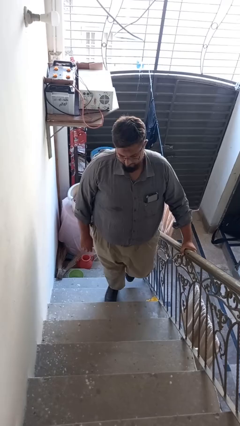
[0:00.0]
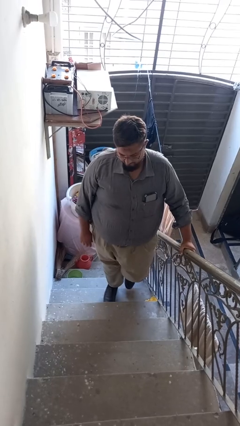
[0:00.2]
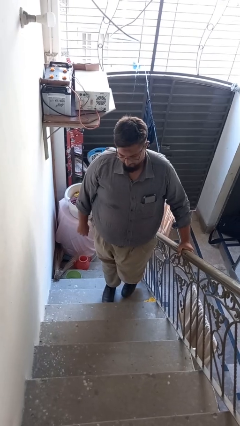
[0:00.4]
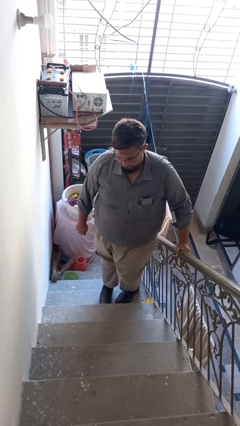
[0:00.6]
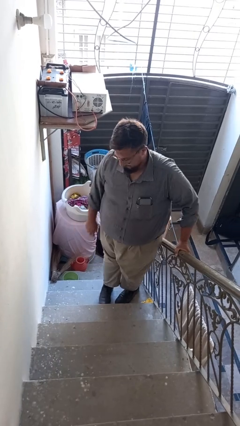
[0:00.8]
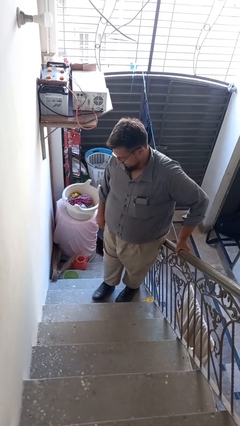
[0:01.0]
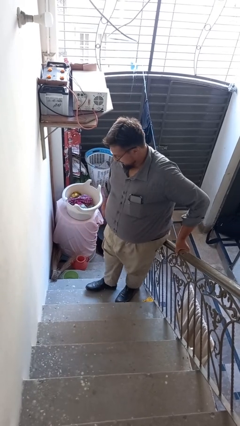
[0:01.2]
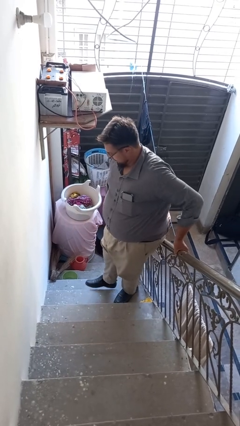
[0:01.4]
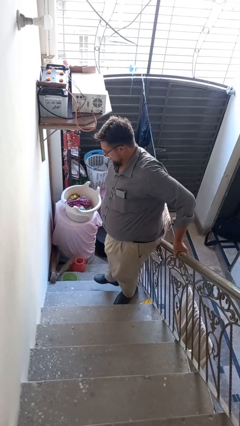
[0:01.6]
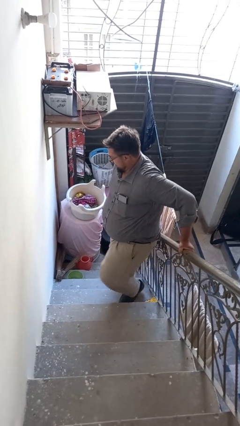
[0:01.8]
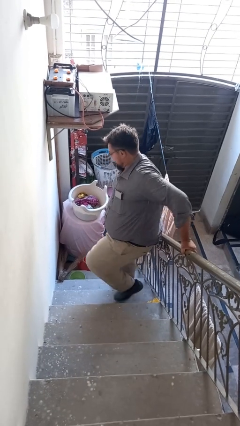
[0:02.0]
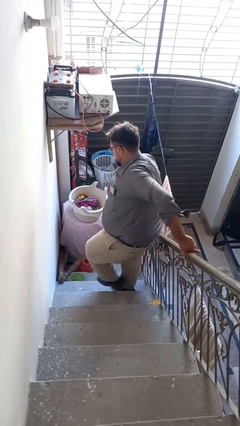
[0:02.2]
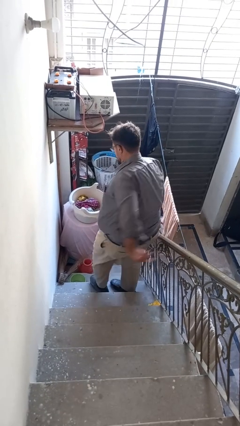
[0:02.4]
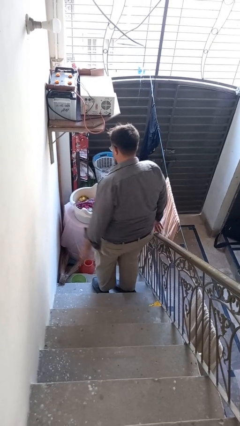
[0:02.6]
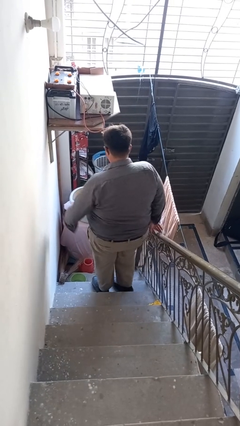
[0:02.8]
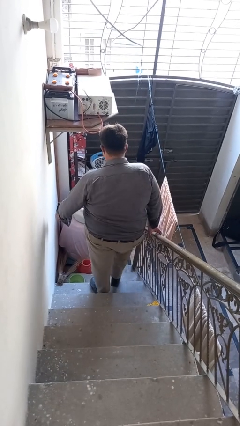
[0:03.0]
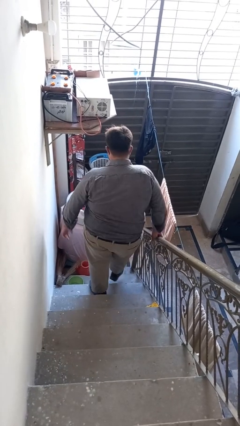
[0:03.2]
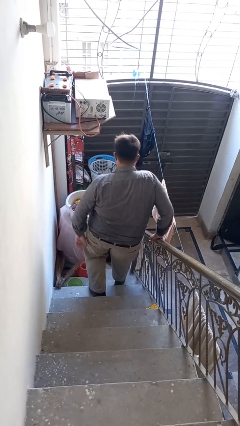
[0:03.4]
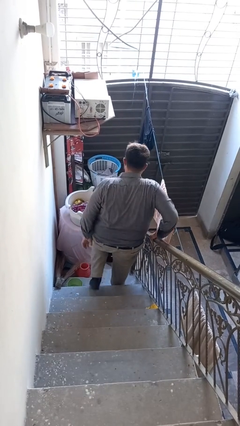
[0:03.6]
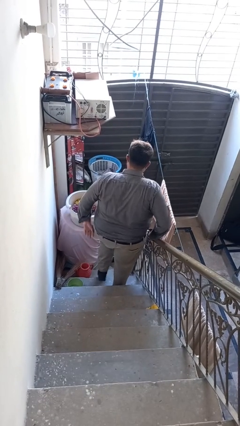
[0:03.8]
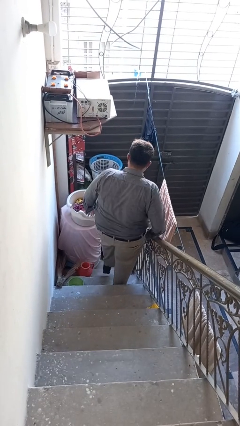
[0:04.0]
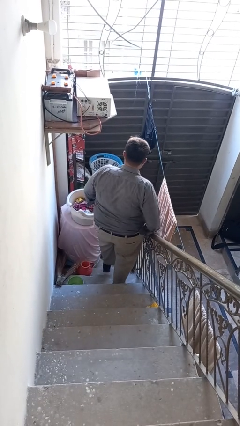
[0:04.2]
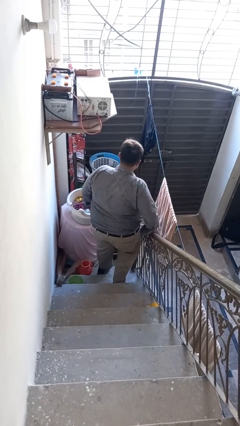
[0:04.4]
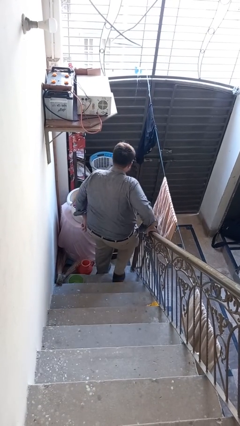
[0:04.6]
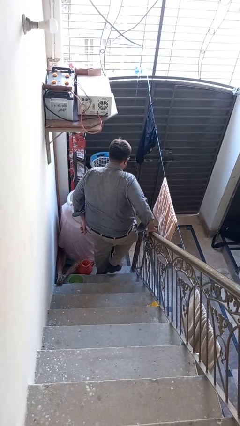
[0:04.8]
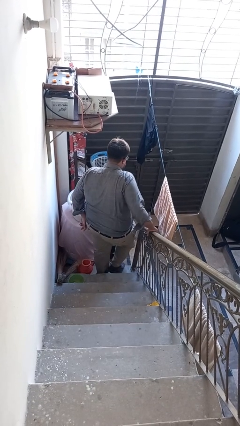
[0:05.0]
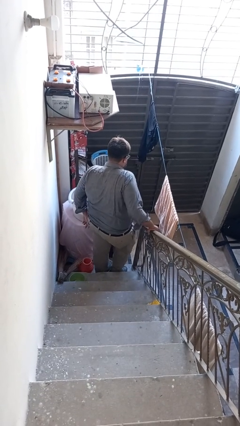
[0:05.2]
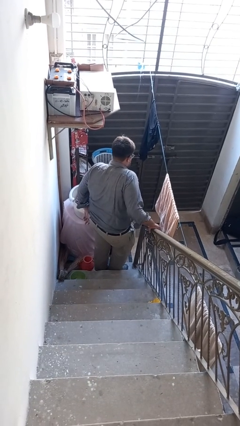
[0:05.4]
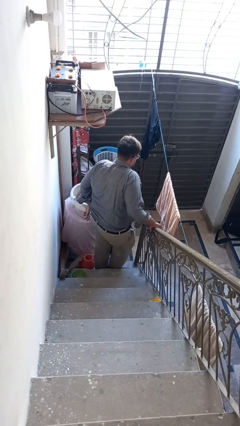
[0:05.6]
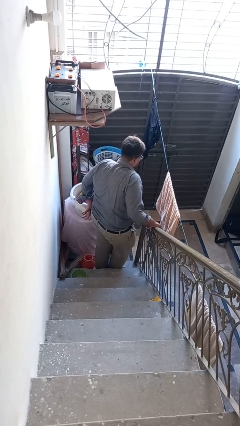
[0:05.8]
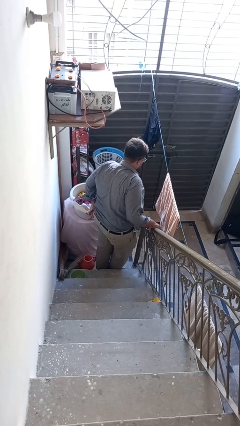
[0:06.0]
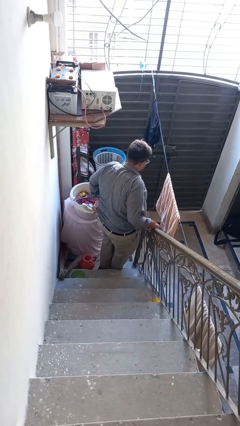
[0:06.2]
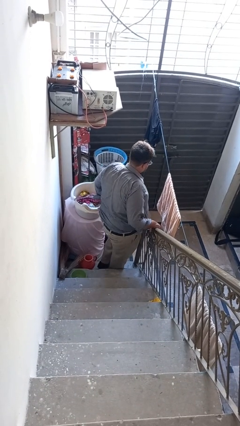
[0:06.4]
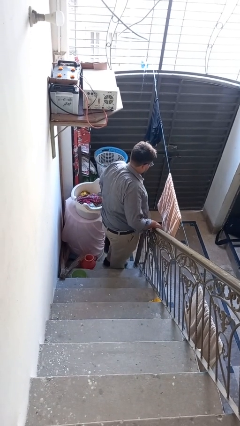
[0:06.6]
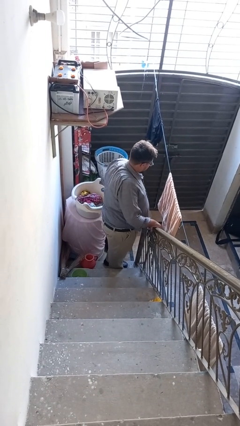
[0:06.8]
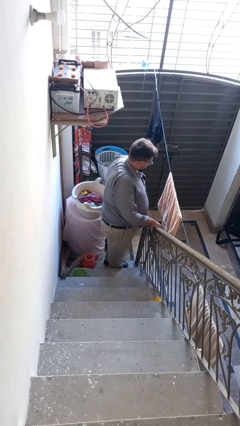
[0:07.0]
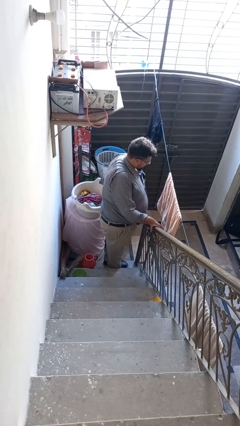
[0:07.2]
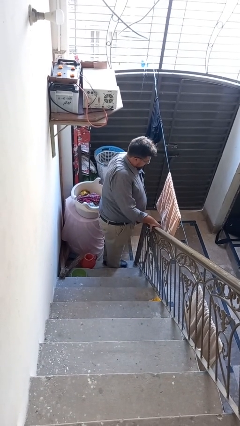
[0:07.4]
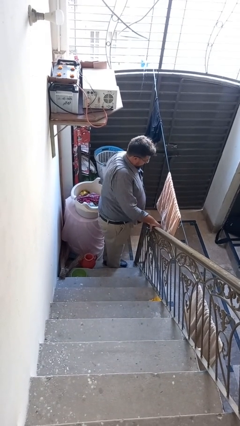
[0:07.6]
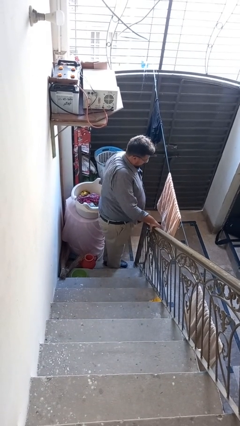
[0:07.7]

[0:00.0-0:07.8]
person climbs down stairs

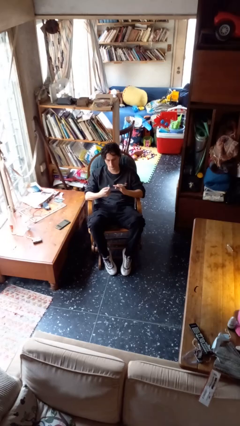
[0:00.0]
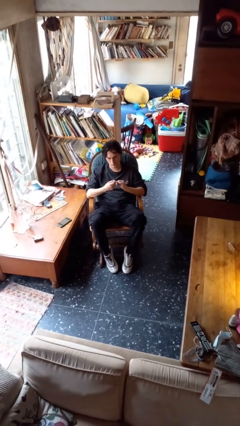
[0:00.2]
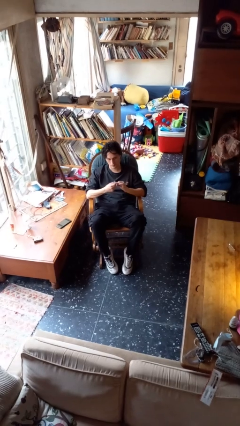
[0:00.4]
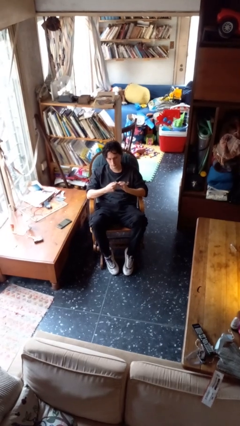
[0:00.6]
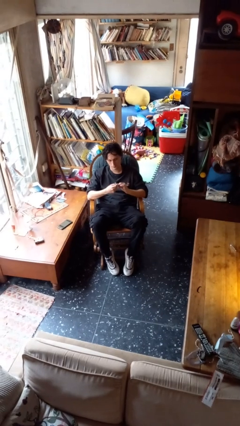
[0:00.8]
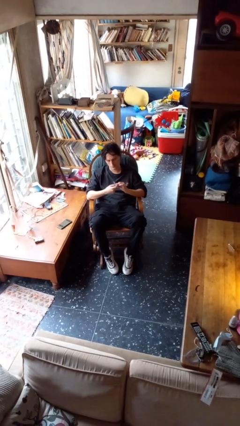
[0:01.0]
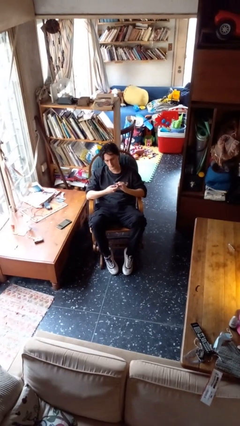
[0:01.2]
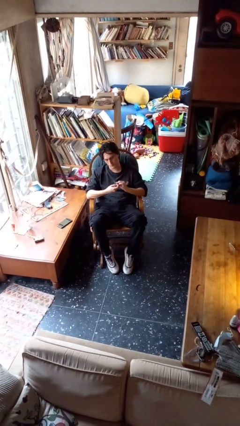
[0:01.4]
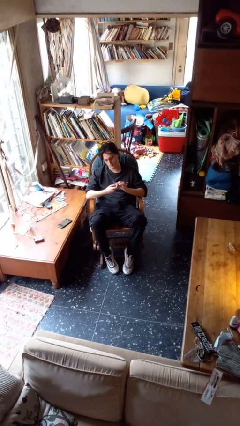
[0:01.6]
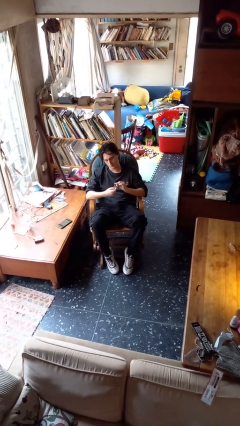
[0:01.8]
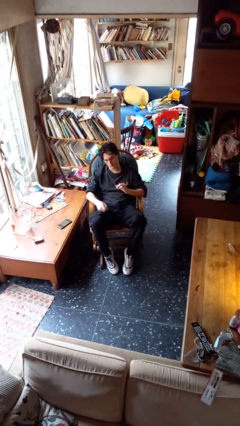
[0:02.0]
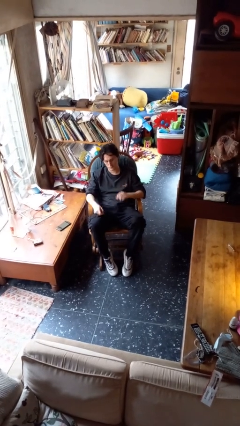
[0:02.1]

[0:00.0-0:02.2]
person files fingernails

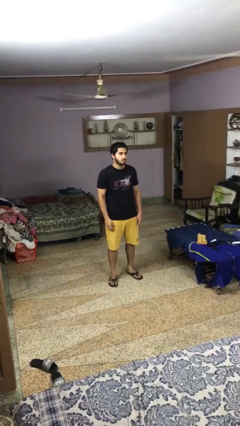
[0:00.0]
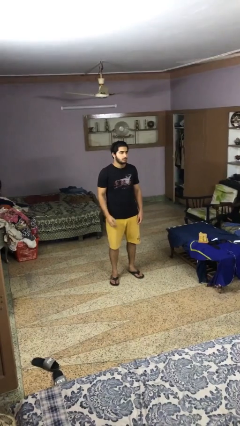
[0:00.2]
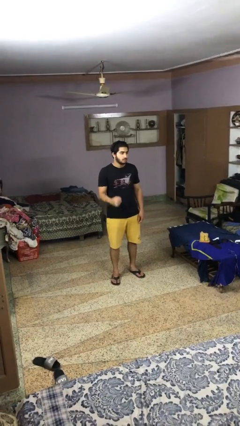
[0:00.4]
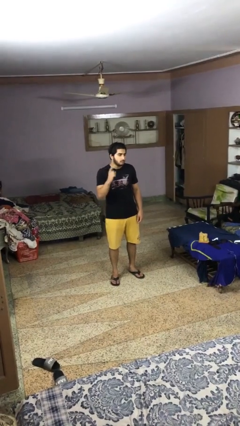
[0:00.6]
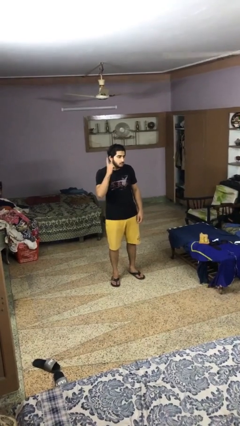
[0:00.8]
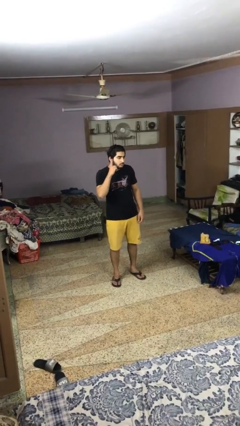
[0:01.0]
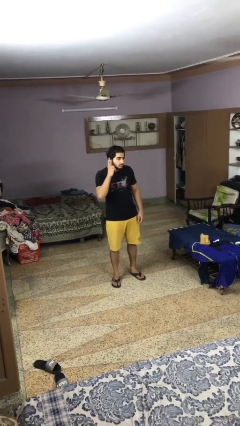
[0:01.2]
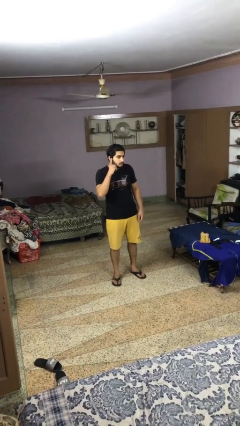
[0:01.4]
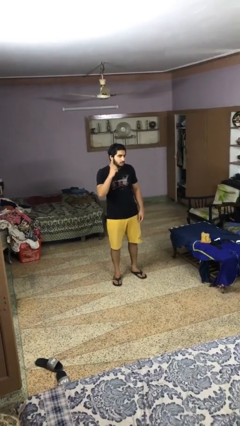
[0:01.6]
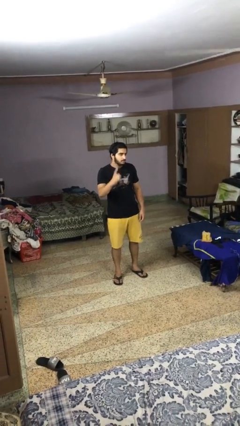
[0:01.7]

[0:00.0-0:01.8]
person gestures listen closely

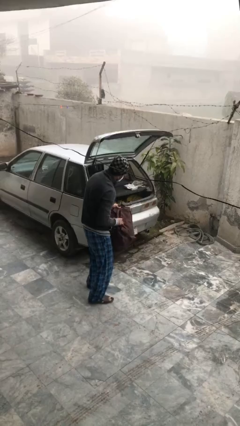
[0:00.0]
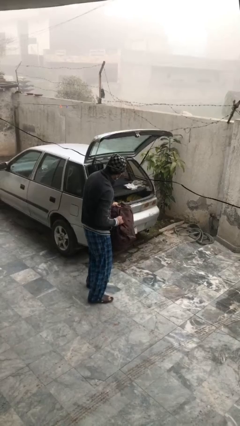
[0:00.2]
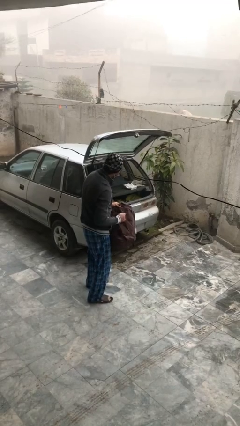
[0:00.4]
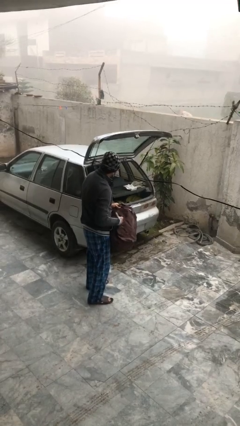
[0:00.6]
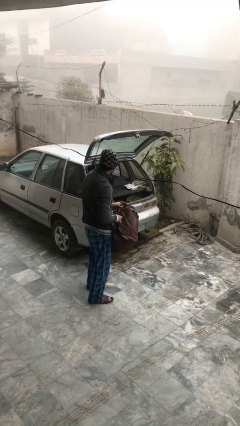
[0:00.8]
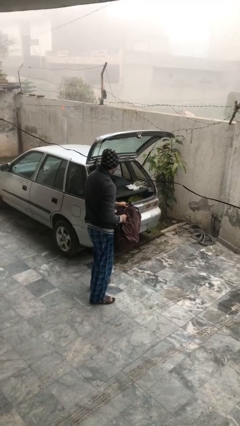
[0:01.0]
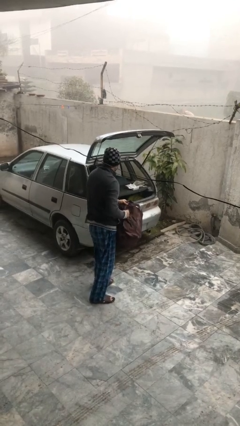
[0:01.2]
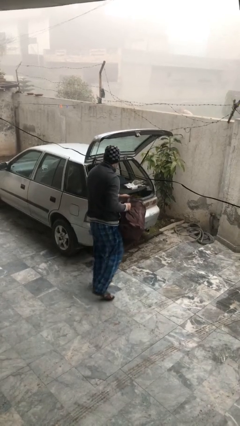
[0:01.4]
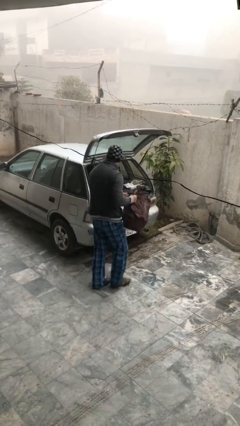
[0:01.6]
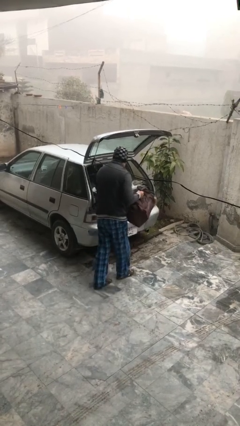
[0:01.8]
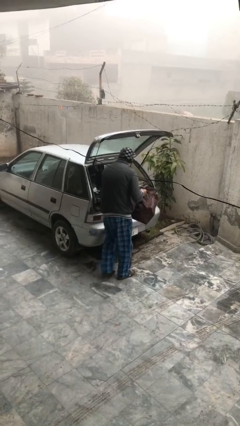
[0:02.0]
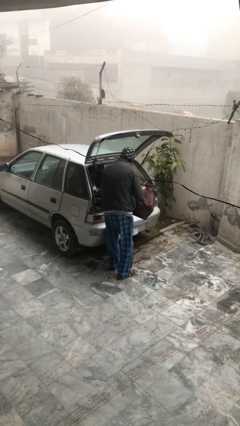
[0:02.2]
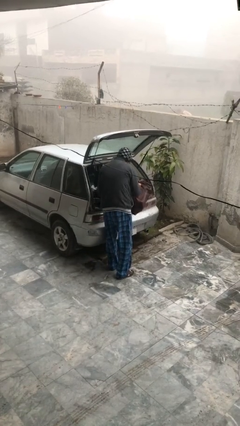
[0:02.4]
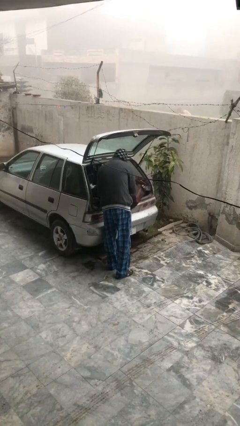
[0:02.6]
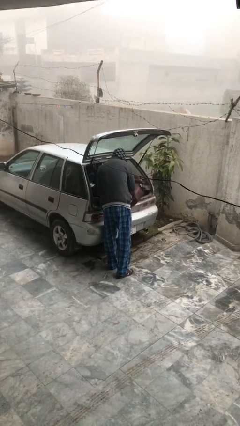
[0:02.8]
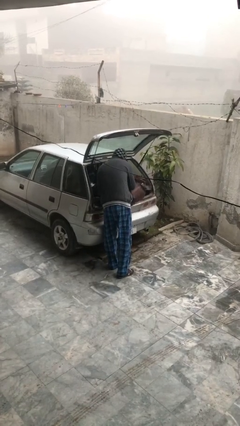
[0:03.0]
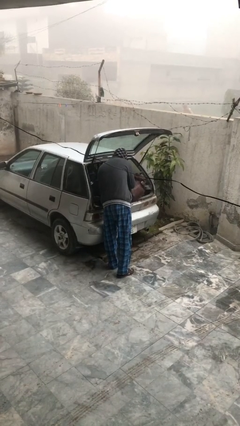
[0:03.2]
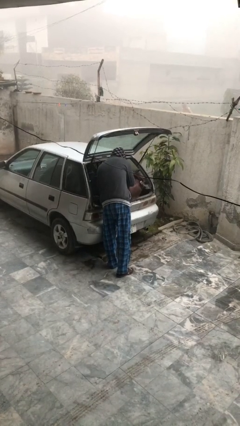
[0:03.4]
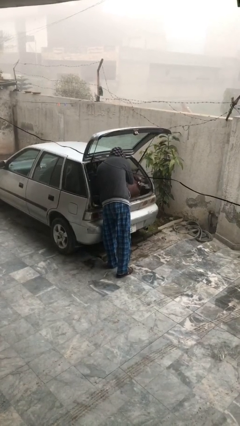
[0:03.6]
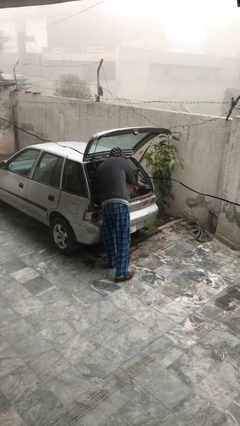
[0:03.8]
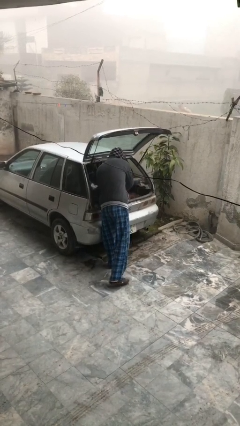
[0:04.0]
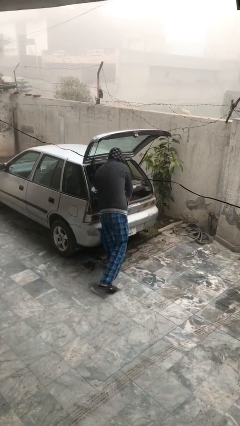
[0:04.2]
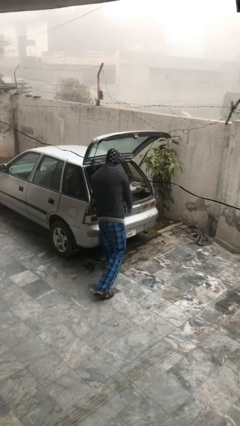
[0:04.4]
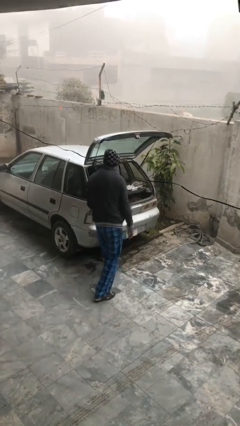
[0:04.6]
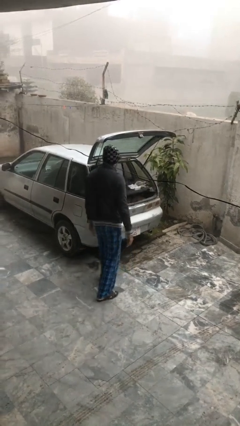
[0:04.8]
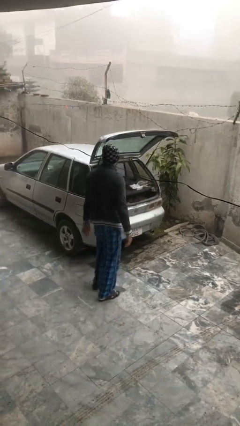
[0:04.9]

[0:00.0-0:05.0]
person loads car

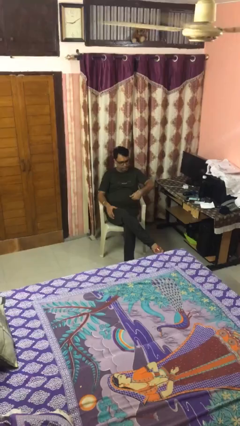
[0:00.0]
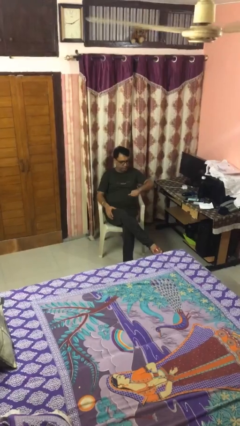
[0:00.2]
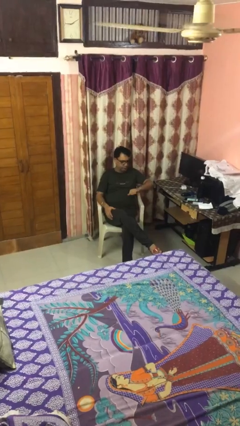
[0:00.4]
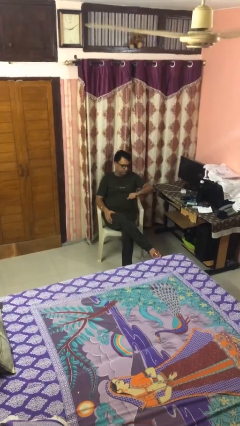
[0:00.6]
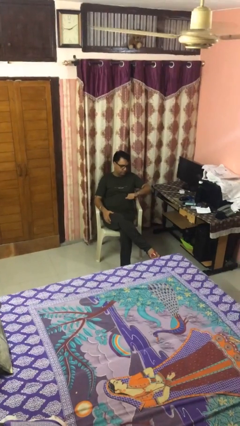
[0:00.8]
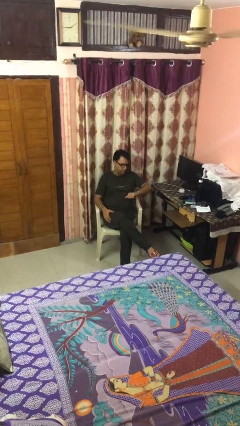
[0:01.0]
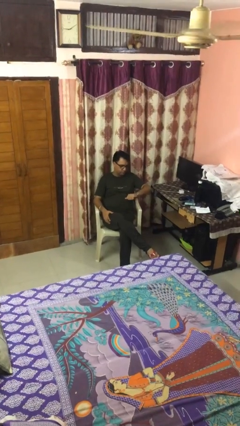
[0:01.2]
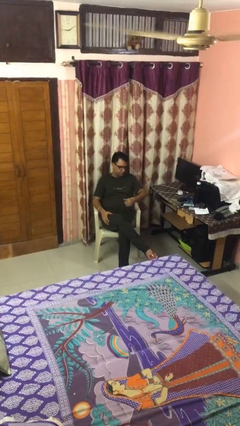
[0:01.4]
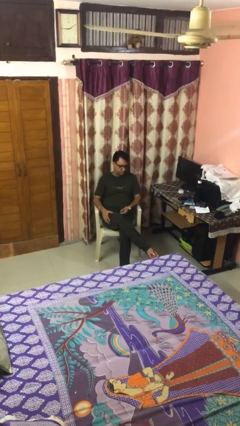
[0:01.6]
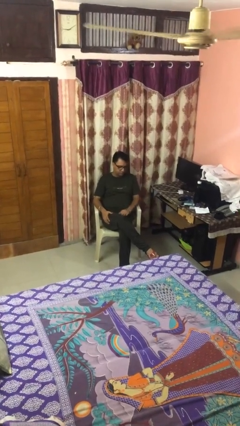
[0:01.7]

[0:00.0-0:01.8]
person looks at wristwatch
